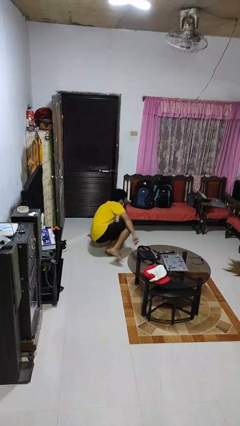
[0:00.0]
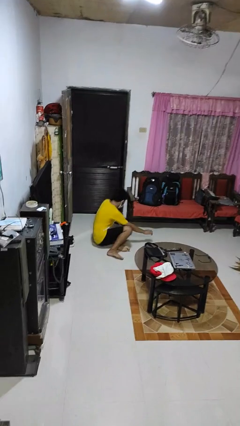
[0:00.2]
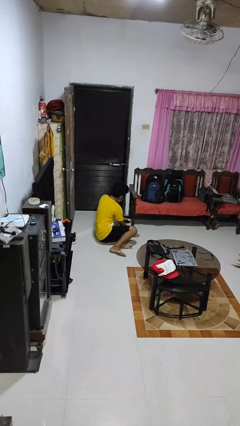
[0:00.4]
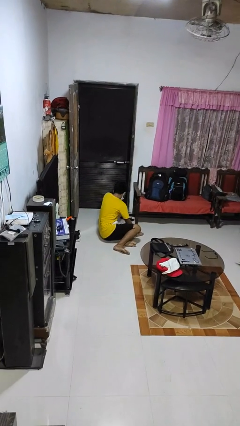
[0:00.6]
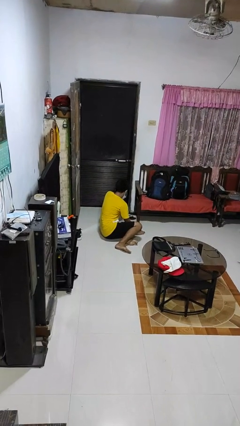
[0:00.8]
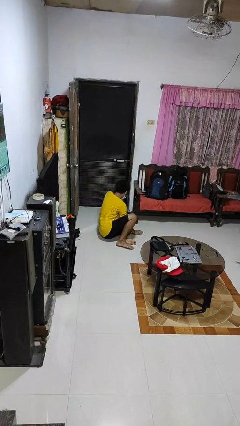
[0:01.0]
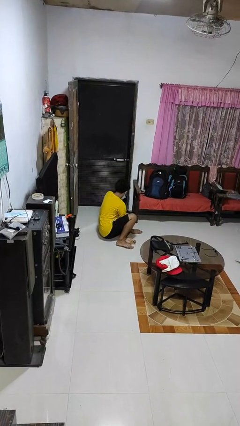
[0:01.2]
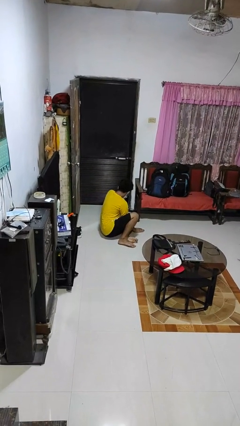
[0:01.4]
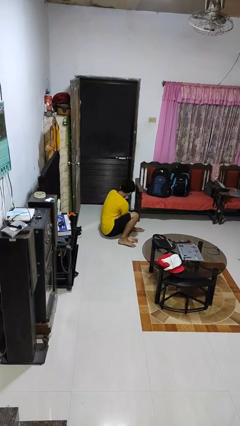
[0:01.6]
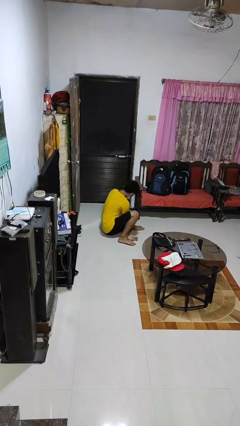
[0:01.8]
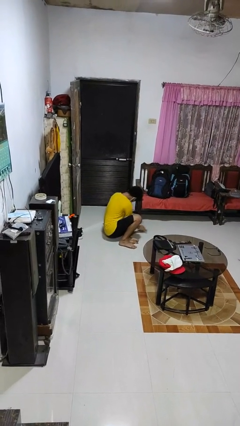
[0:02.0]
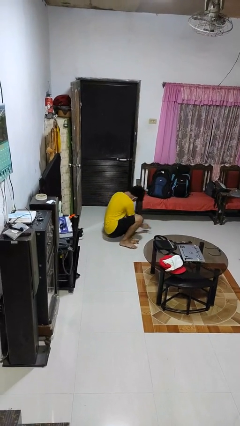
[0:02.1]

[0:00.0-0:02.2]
person lies down on floor

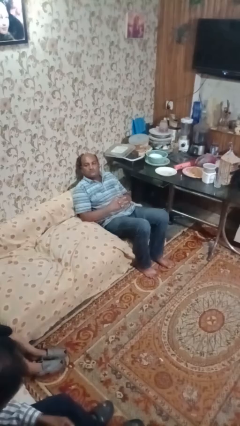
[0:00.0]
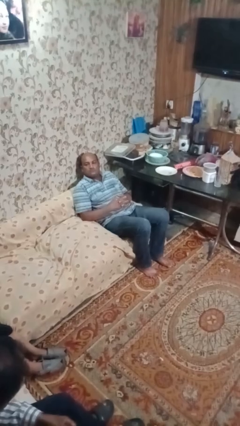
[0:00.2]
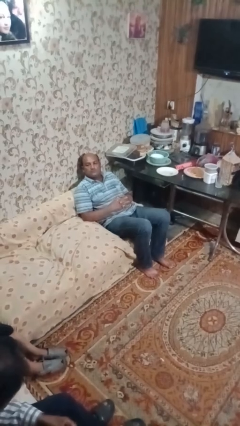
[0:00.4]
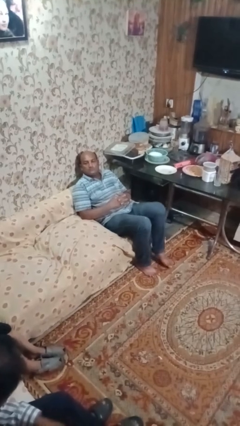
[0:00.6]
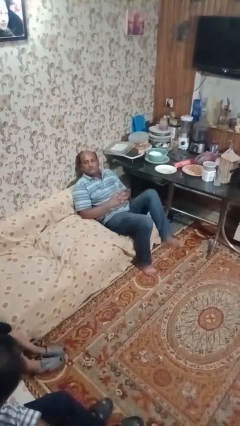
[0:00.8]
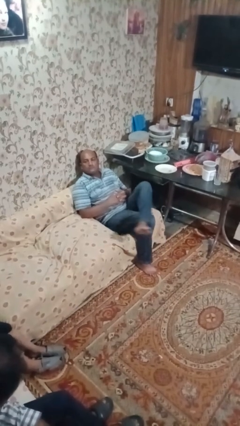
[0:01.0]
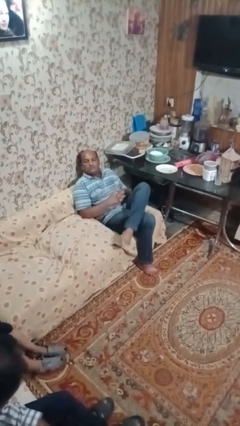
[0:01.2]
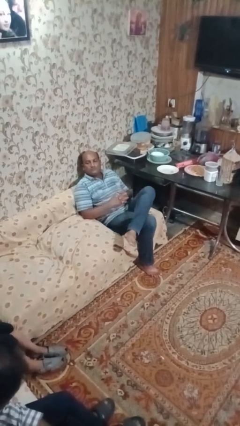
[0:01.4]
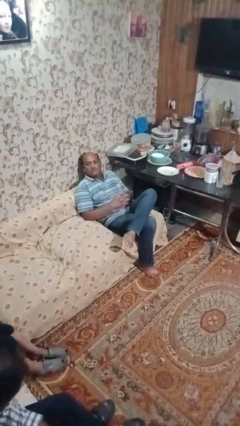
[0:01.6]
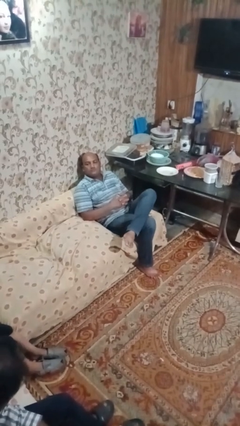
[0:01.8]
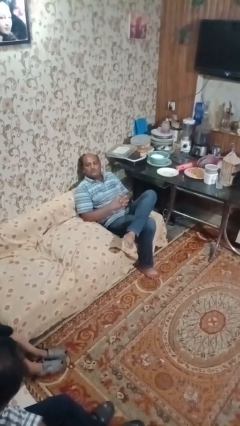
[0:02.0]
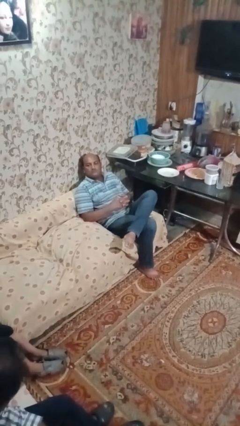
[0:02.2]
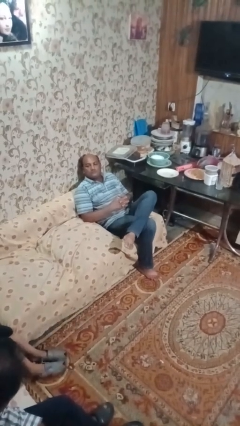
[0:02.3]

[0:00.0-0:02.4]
person crosses legs

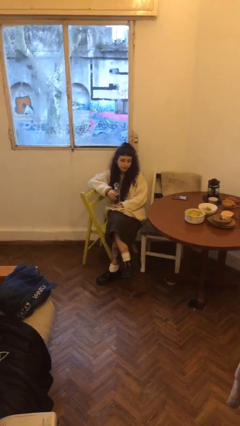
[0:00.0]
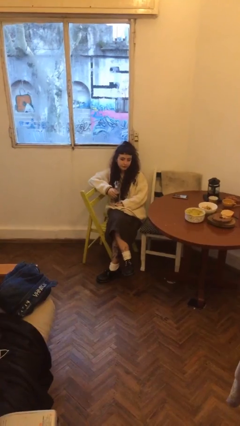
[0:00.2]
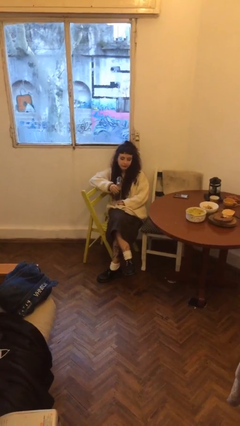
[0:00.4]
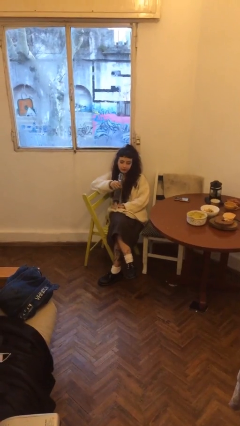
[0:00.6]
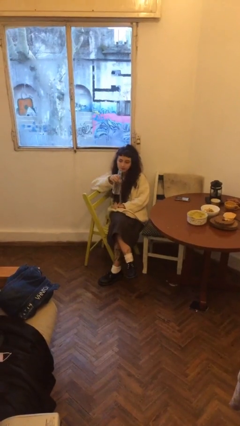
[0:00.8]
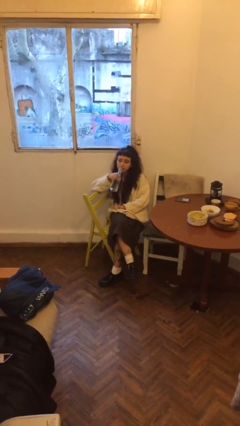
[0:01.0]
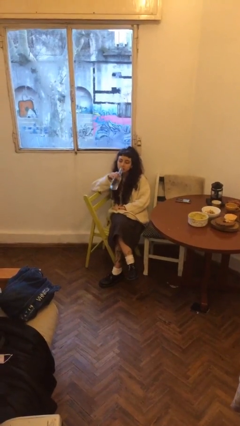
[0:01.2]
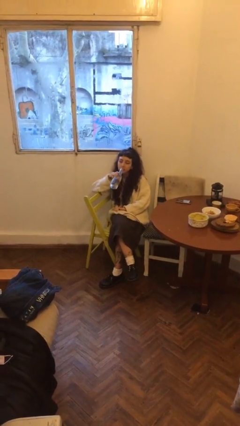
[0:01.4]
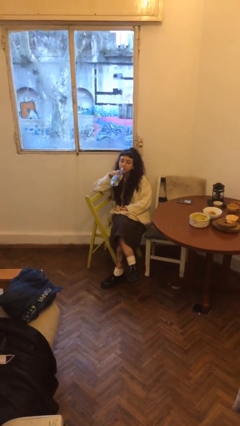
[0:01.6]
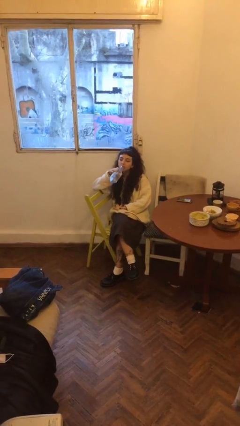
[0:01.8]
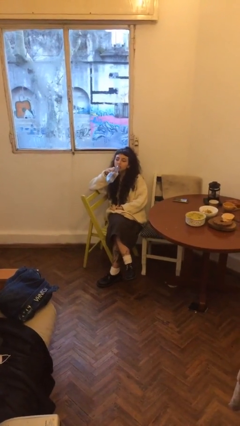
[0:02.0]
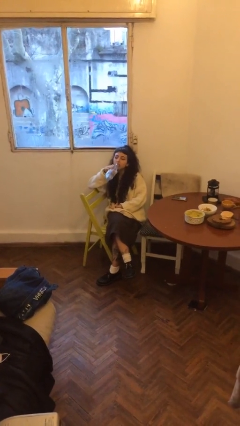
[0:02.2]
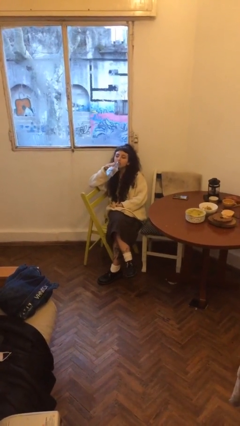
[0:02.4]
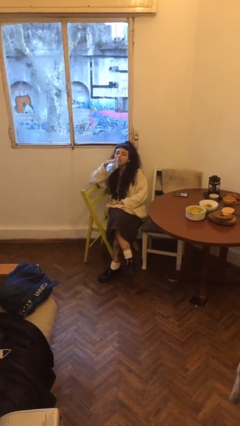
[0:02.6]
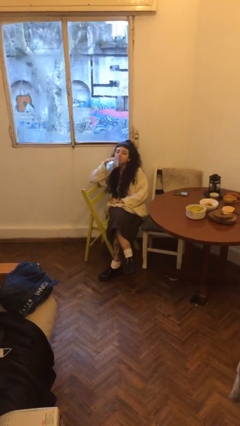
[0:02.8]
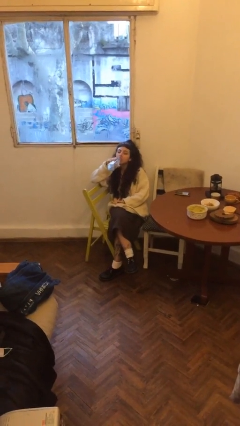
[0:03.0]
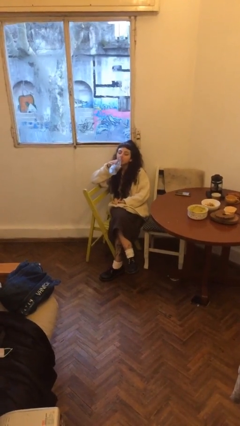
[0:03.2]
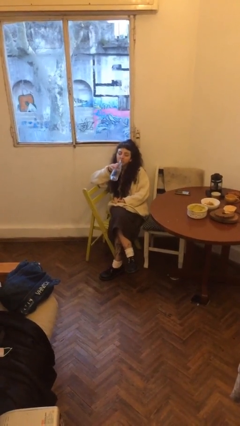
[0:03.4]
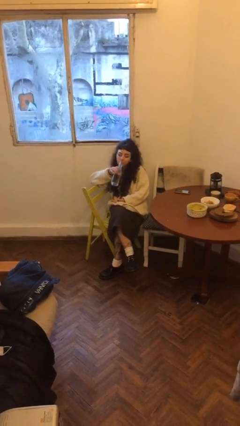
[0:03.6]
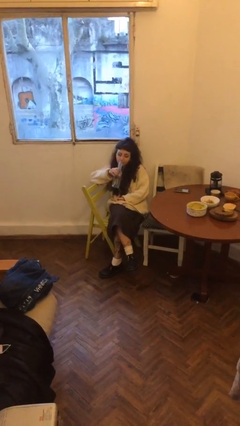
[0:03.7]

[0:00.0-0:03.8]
person drinks from bottle

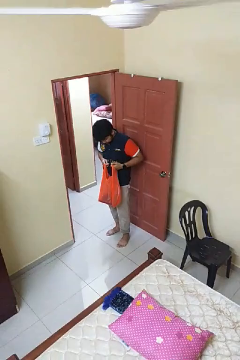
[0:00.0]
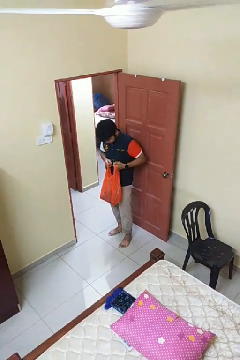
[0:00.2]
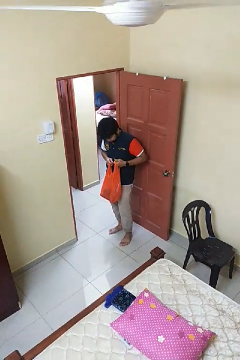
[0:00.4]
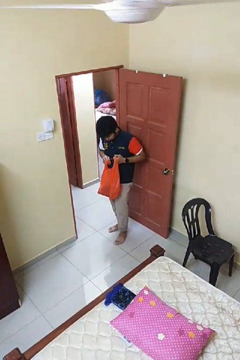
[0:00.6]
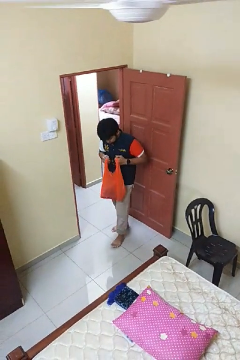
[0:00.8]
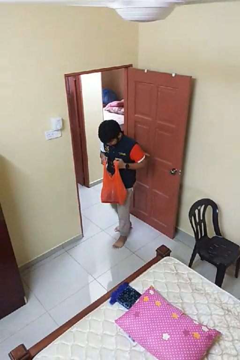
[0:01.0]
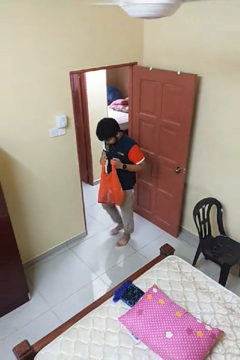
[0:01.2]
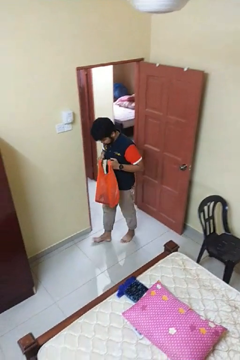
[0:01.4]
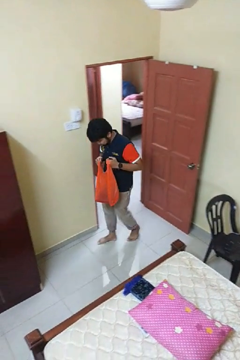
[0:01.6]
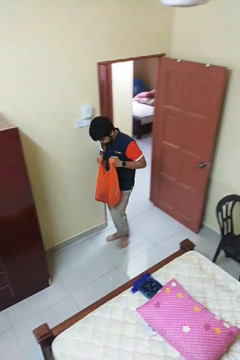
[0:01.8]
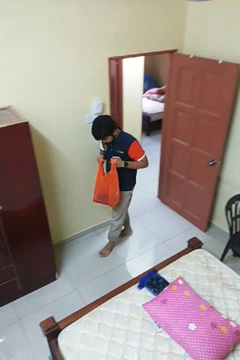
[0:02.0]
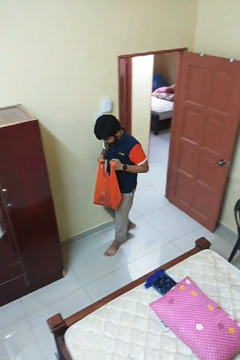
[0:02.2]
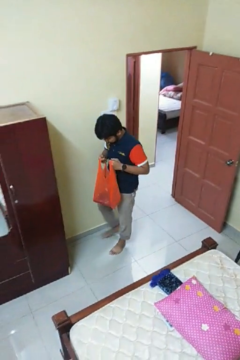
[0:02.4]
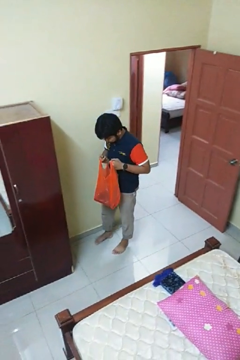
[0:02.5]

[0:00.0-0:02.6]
person carries groceries

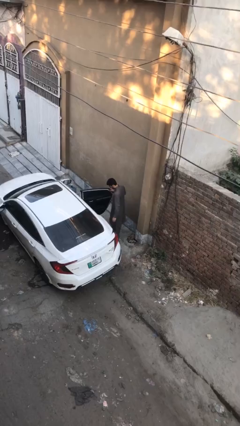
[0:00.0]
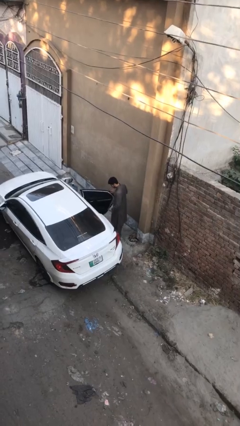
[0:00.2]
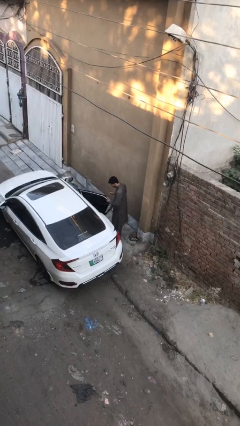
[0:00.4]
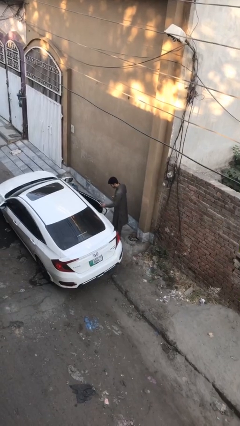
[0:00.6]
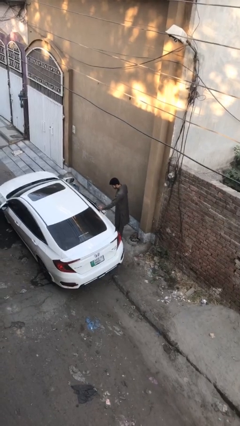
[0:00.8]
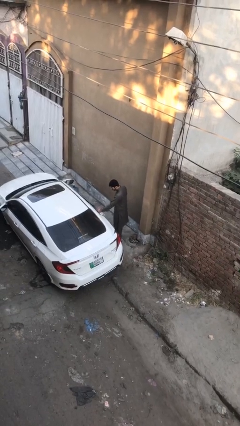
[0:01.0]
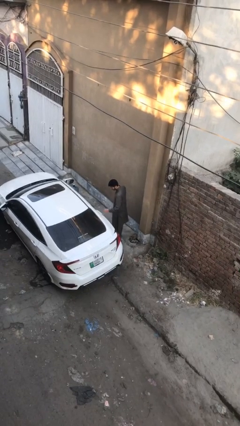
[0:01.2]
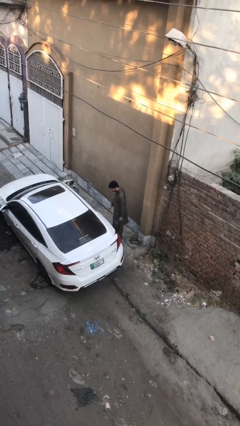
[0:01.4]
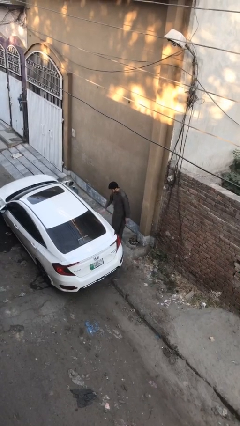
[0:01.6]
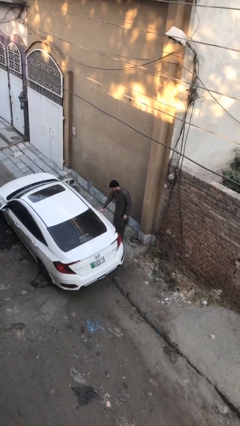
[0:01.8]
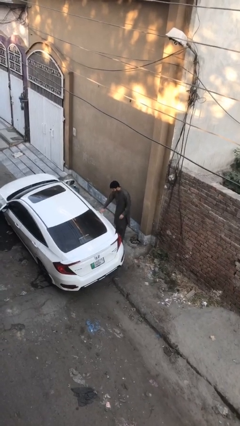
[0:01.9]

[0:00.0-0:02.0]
person closes car door

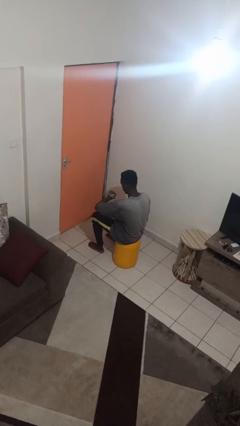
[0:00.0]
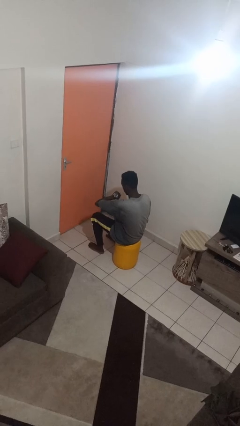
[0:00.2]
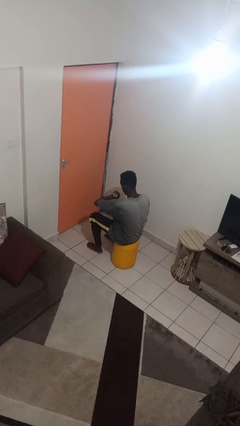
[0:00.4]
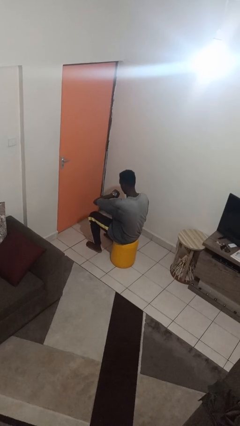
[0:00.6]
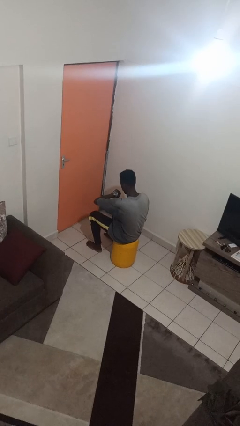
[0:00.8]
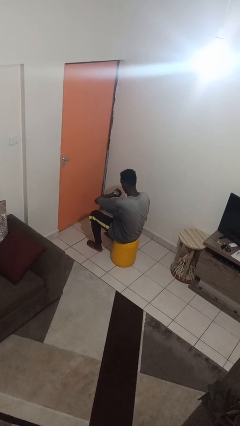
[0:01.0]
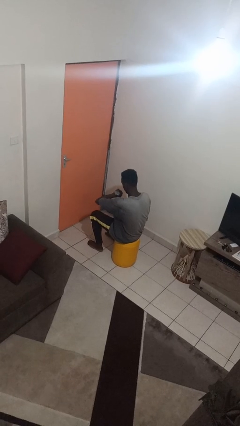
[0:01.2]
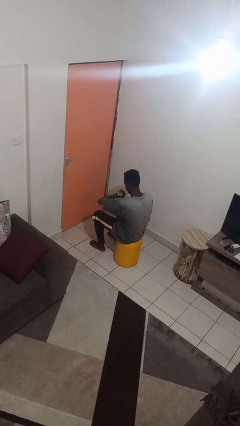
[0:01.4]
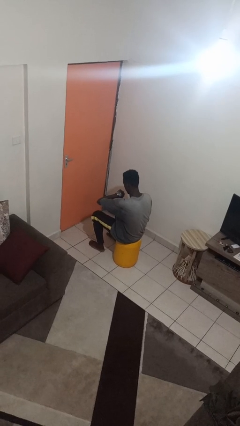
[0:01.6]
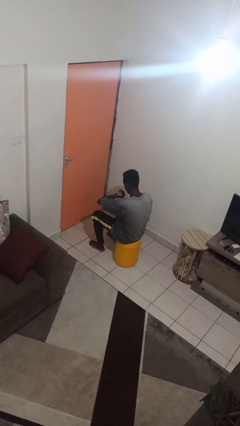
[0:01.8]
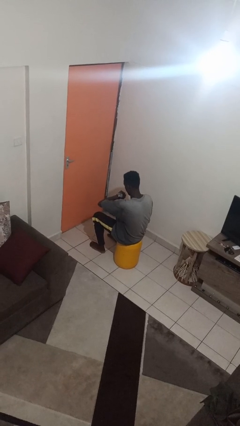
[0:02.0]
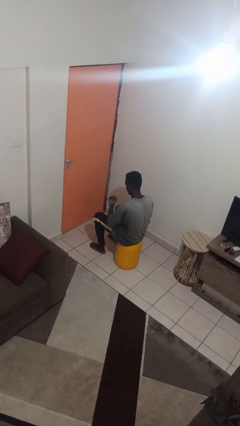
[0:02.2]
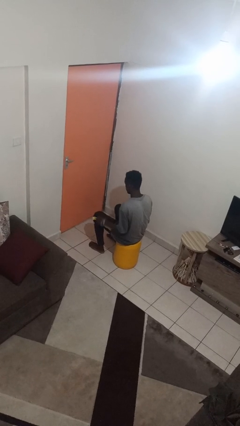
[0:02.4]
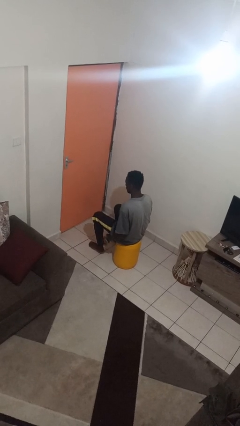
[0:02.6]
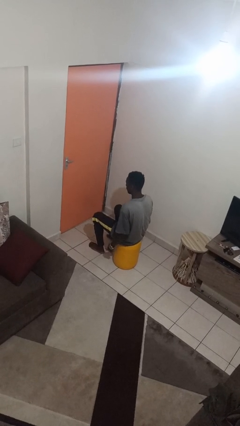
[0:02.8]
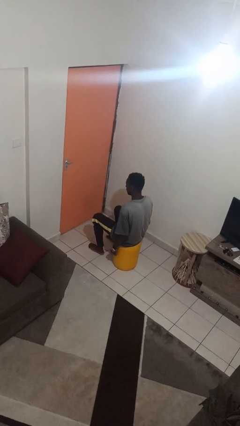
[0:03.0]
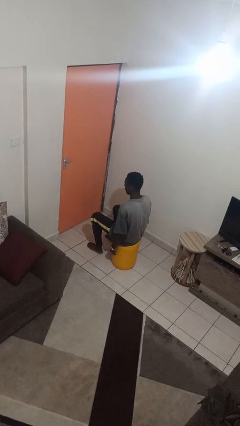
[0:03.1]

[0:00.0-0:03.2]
person looks at wristwatch

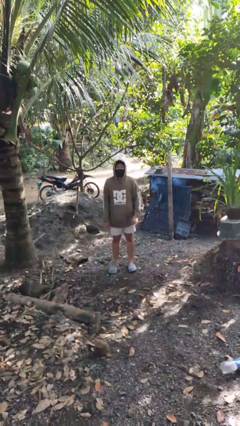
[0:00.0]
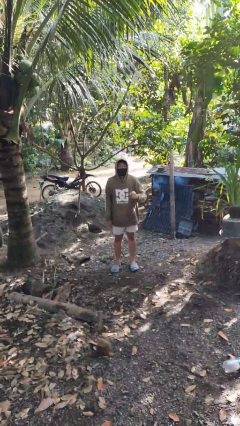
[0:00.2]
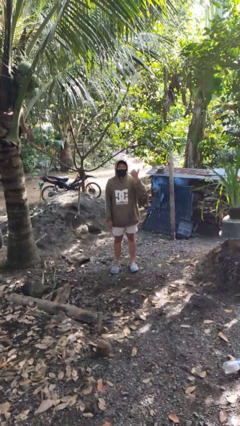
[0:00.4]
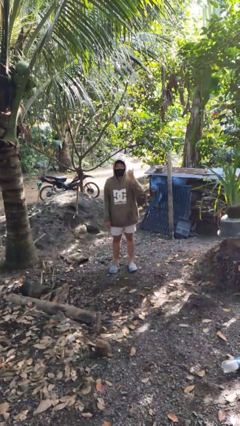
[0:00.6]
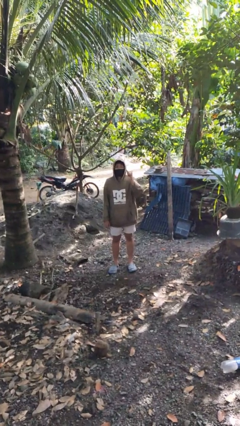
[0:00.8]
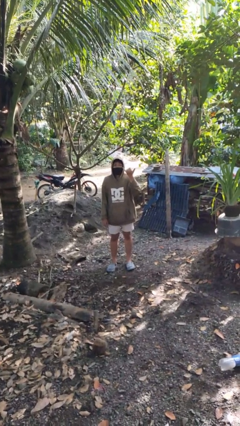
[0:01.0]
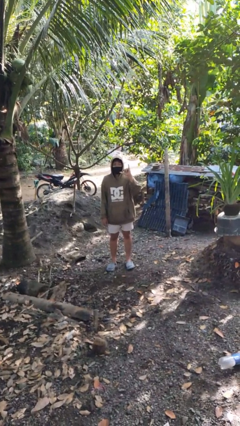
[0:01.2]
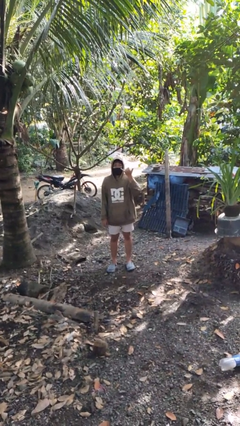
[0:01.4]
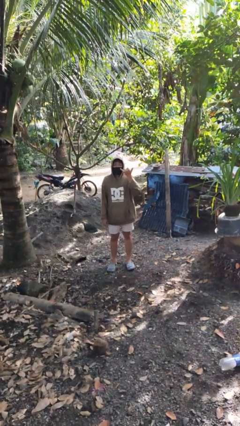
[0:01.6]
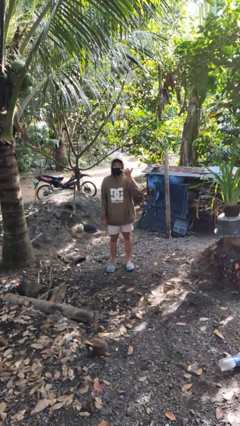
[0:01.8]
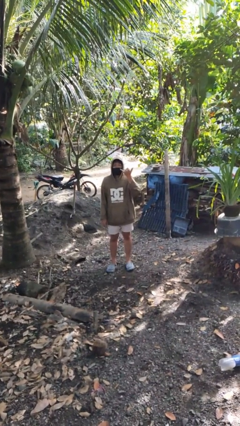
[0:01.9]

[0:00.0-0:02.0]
person gestures hang loose
